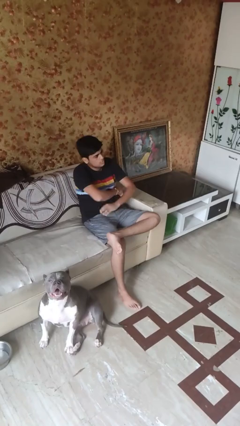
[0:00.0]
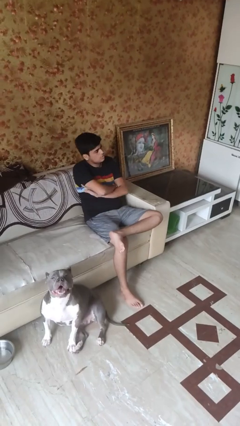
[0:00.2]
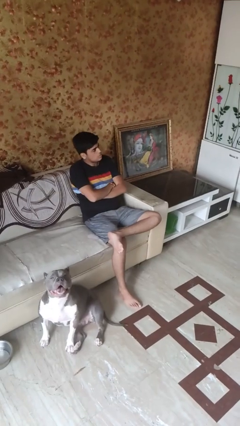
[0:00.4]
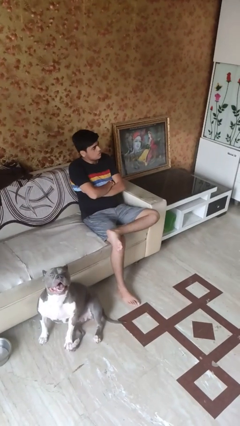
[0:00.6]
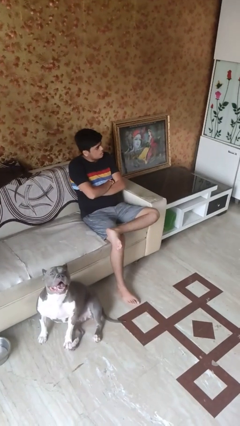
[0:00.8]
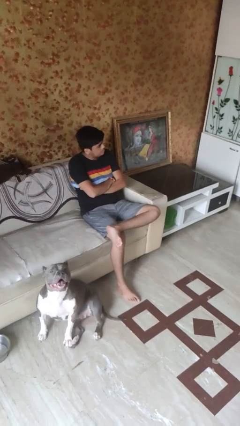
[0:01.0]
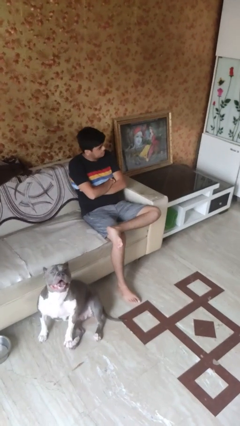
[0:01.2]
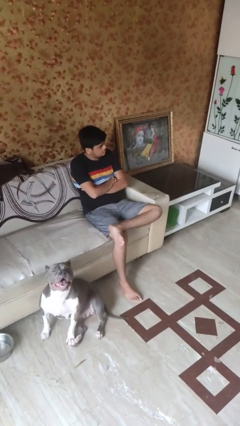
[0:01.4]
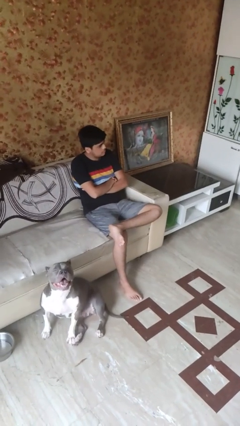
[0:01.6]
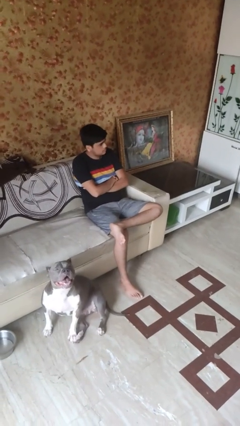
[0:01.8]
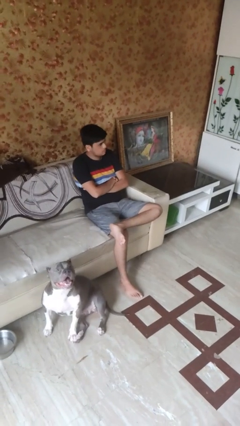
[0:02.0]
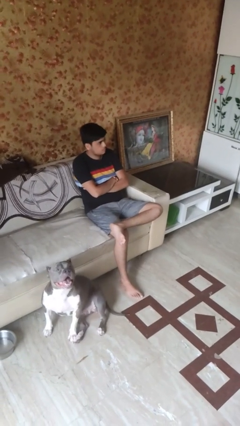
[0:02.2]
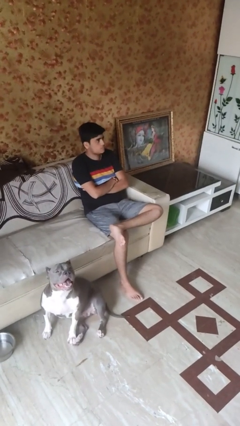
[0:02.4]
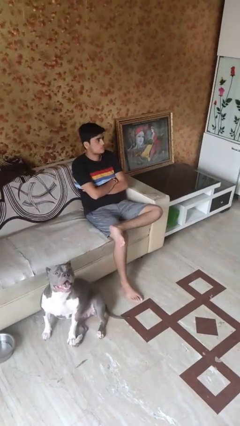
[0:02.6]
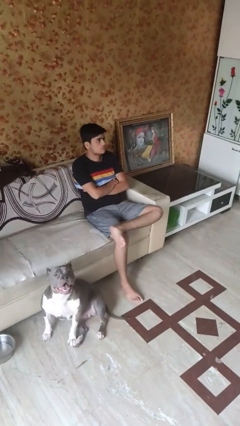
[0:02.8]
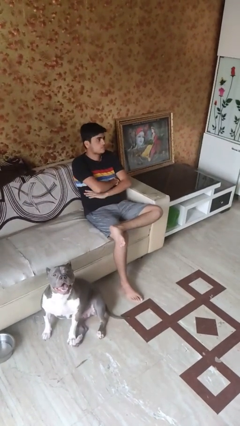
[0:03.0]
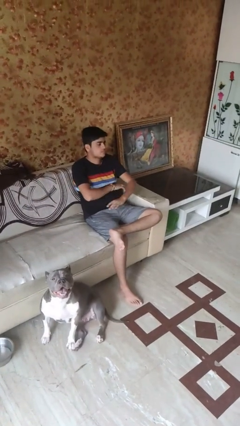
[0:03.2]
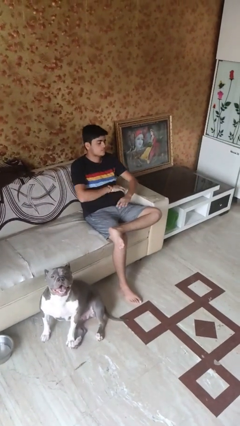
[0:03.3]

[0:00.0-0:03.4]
person crosses arms

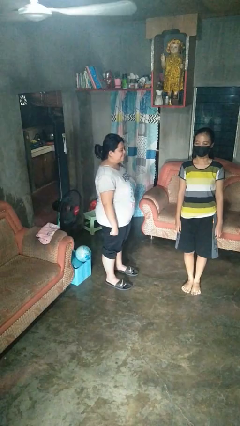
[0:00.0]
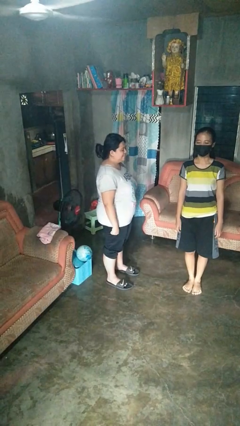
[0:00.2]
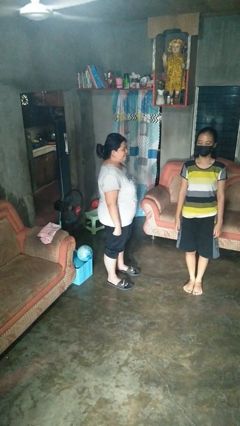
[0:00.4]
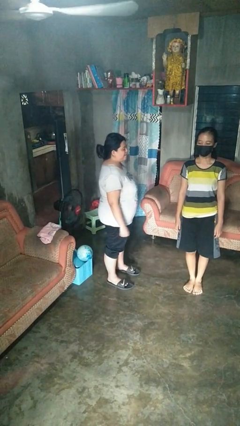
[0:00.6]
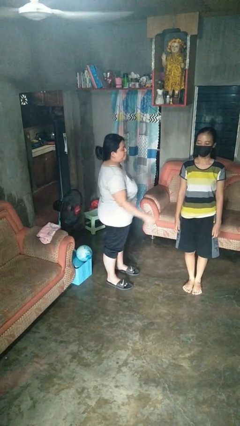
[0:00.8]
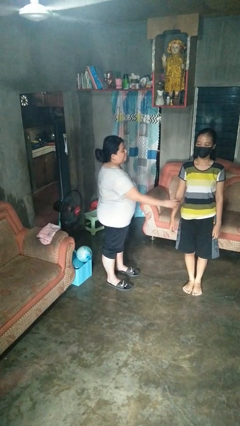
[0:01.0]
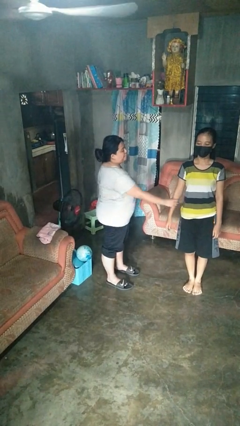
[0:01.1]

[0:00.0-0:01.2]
person grabs person by forearm

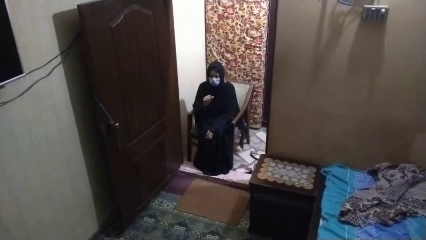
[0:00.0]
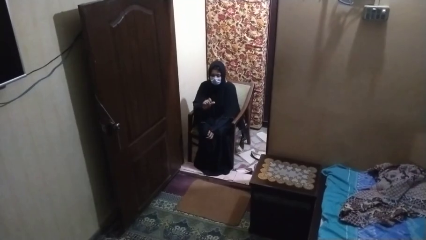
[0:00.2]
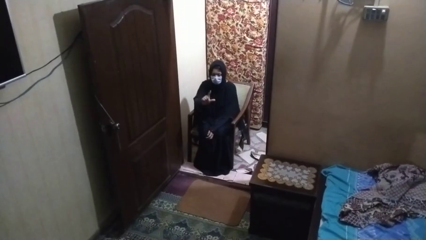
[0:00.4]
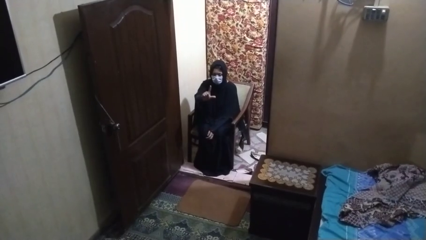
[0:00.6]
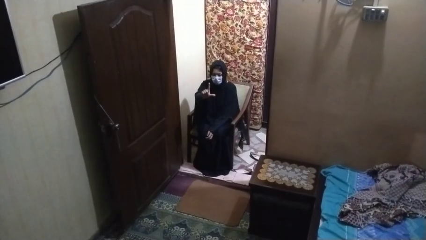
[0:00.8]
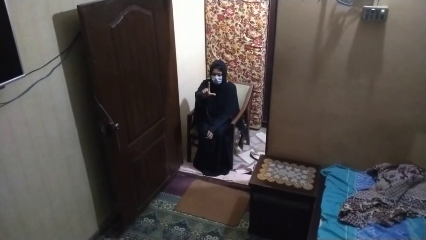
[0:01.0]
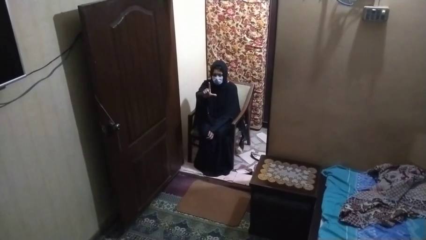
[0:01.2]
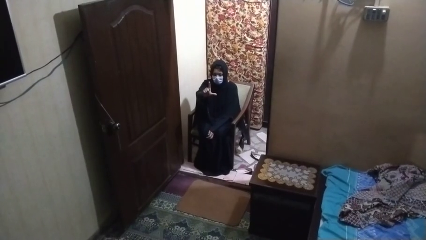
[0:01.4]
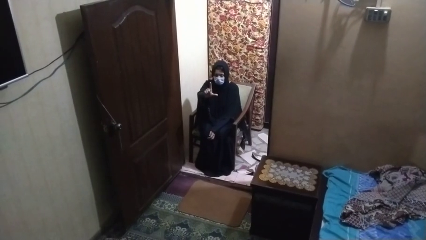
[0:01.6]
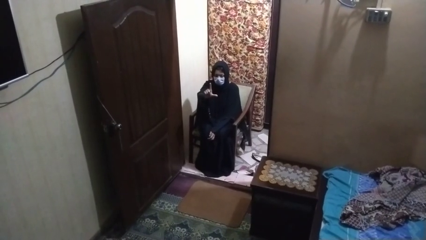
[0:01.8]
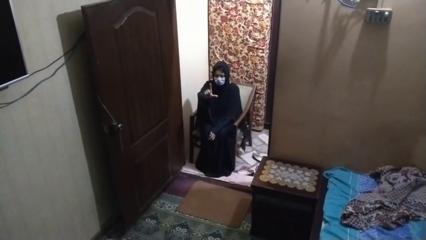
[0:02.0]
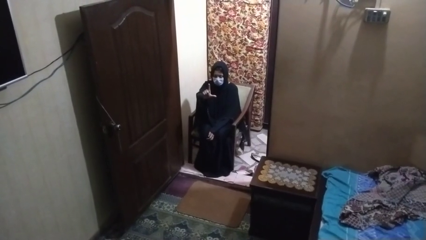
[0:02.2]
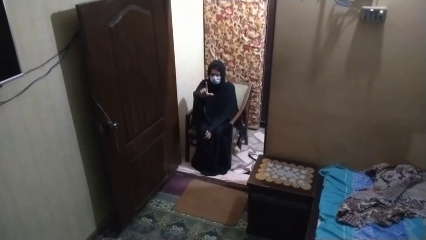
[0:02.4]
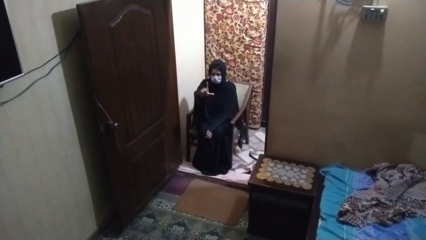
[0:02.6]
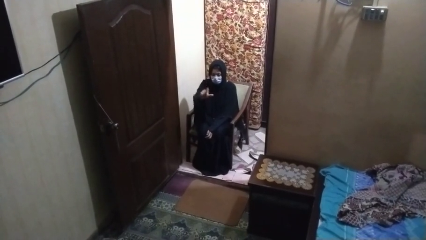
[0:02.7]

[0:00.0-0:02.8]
person gestures zoom in

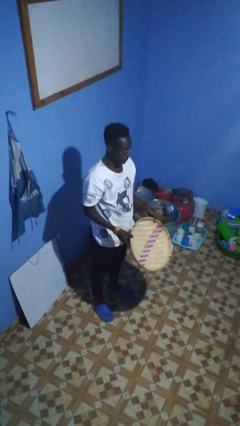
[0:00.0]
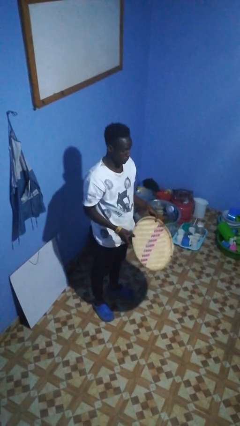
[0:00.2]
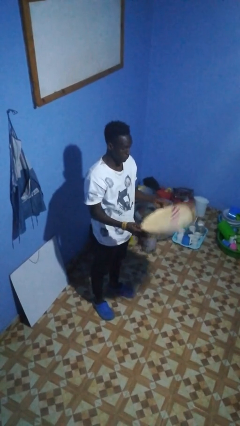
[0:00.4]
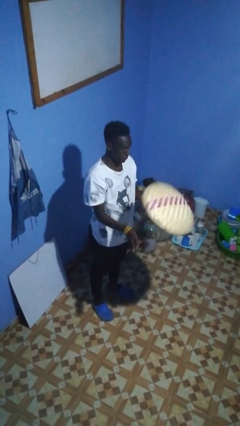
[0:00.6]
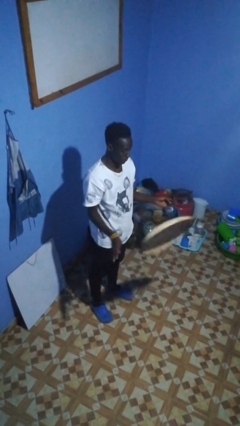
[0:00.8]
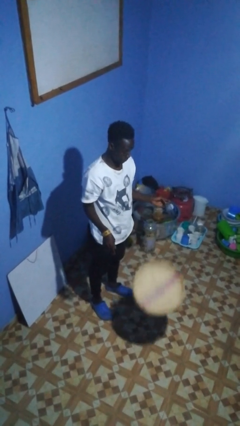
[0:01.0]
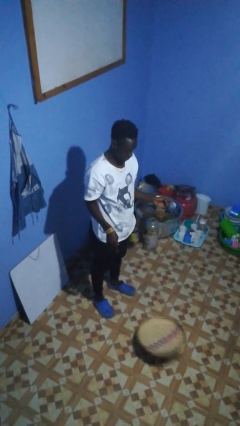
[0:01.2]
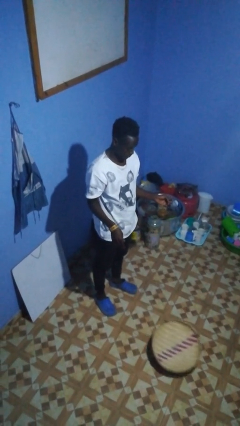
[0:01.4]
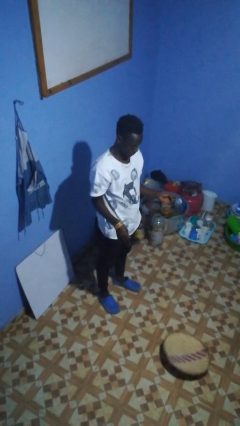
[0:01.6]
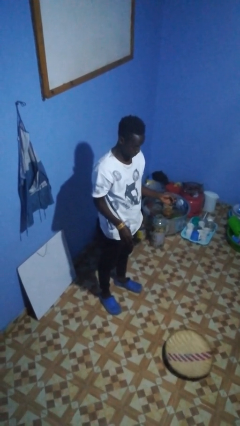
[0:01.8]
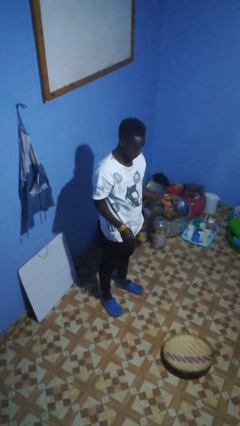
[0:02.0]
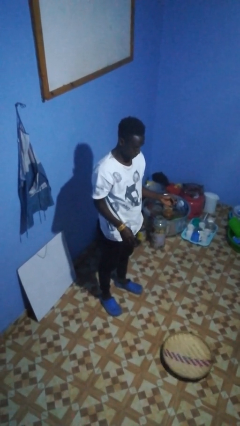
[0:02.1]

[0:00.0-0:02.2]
person throws object into air

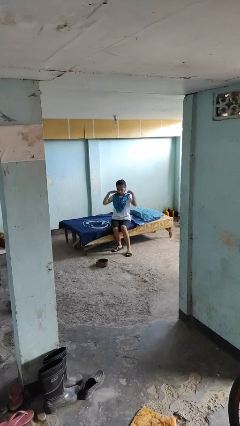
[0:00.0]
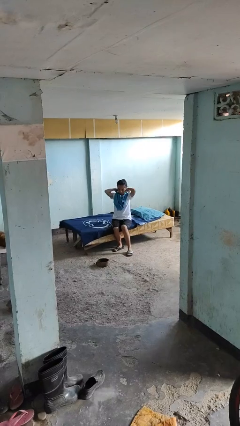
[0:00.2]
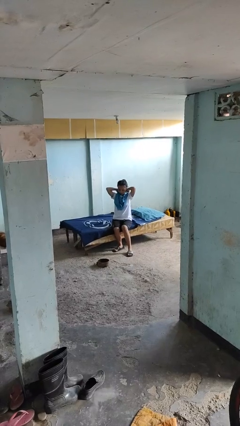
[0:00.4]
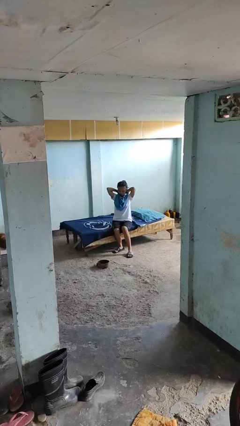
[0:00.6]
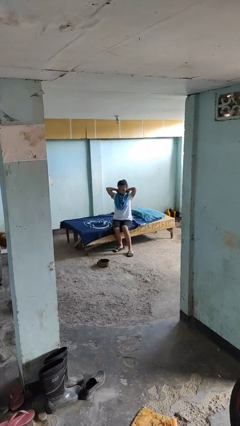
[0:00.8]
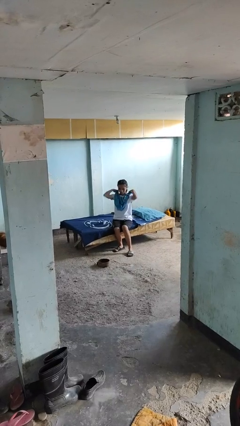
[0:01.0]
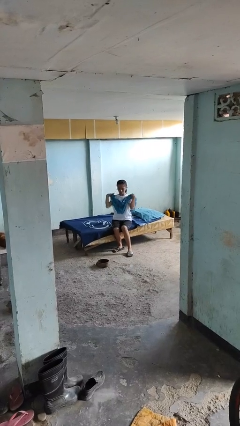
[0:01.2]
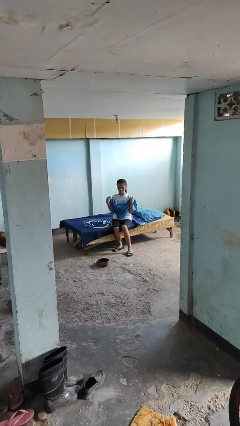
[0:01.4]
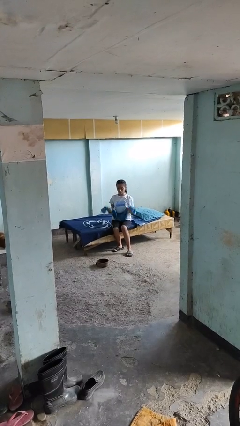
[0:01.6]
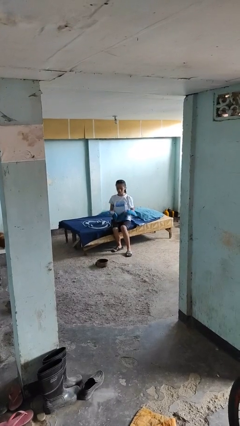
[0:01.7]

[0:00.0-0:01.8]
person takes off scarf

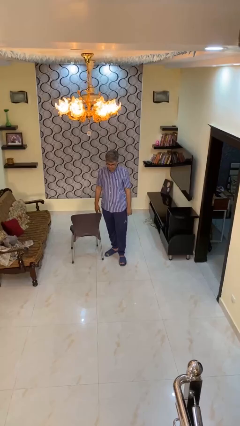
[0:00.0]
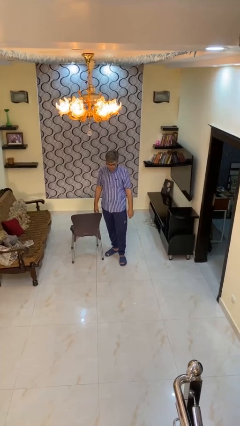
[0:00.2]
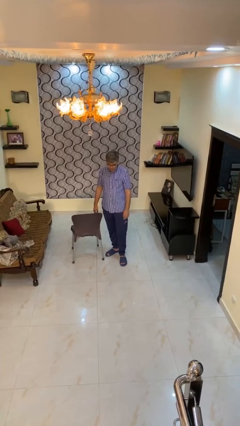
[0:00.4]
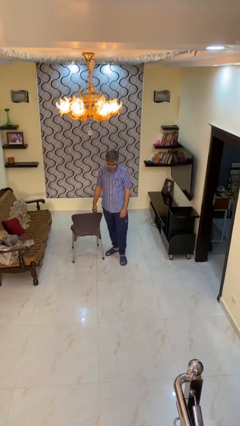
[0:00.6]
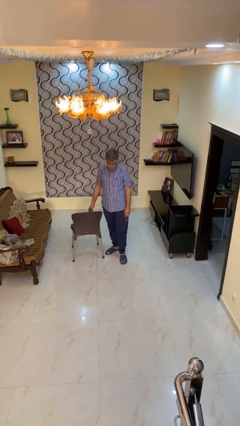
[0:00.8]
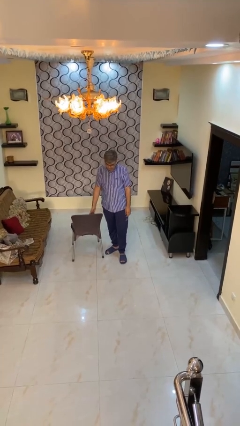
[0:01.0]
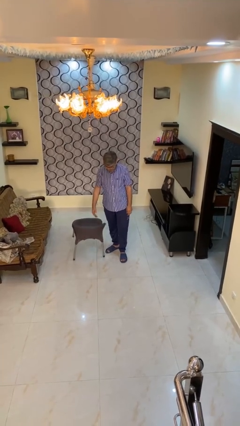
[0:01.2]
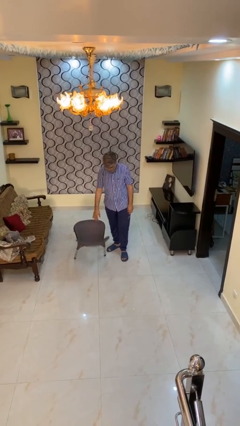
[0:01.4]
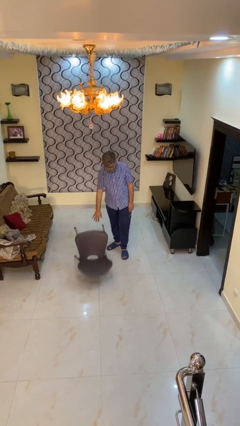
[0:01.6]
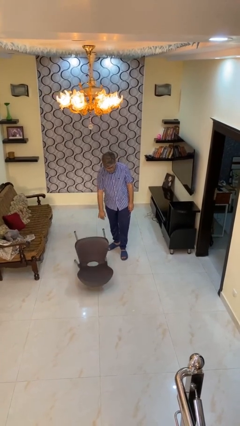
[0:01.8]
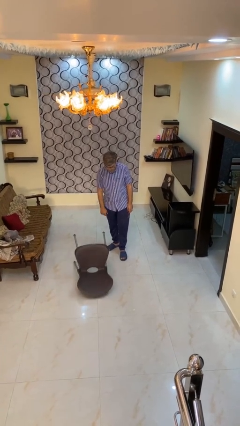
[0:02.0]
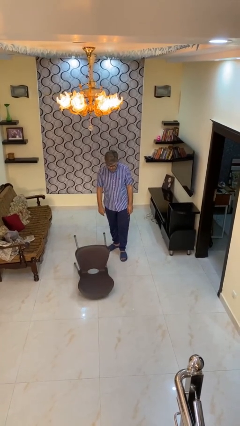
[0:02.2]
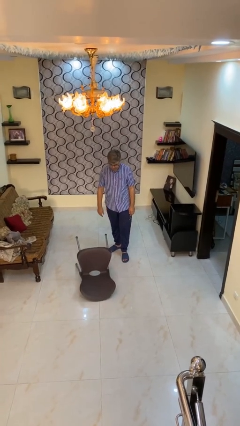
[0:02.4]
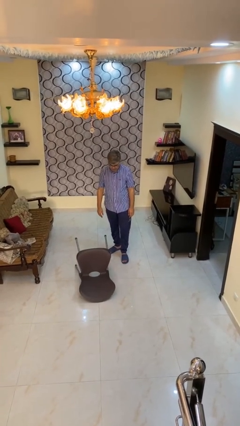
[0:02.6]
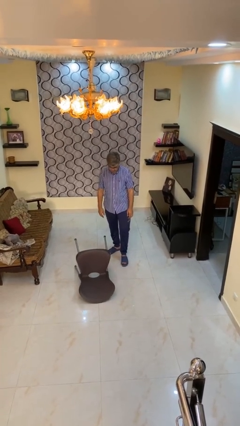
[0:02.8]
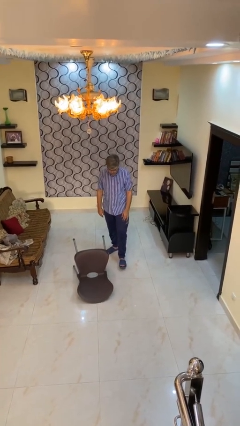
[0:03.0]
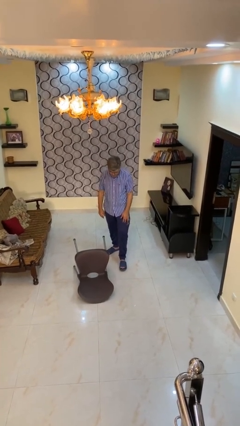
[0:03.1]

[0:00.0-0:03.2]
person knocks over furniture

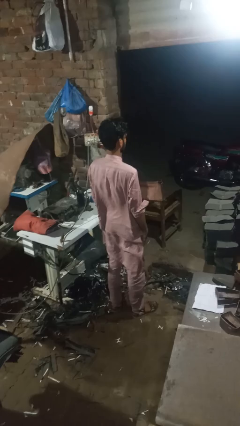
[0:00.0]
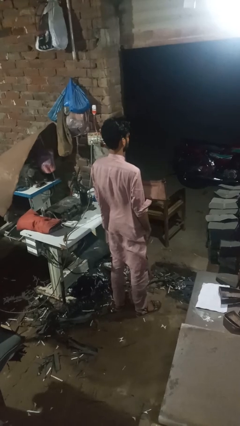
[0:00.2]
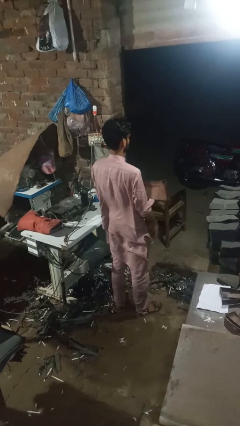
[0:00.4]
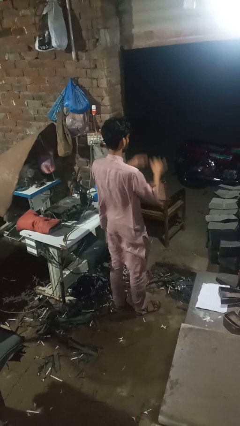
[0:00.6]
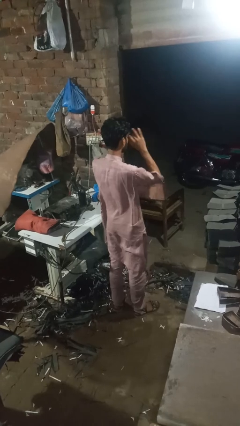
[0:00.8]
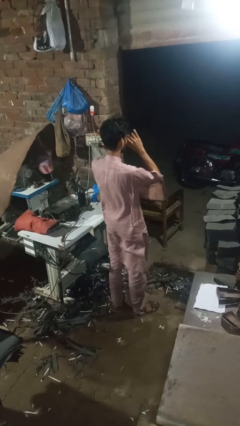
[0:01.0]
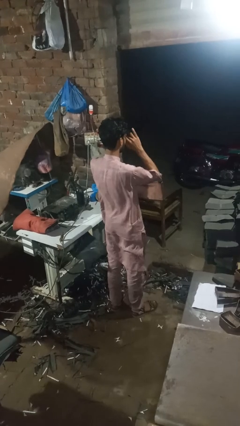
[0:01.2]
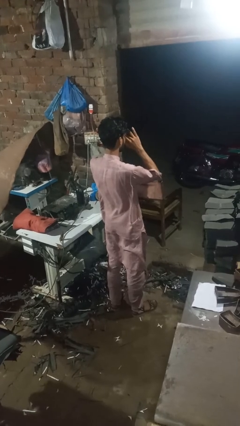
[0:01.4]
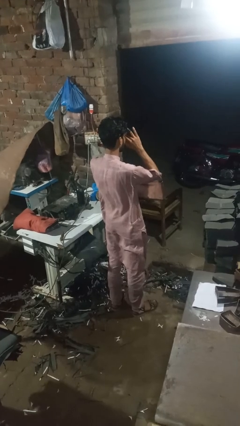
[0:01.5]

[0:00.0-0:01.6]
person rubs eyes

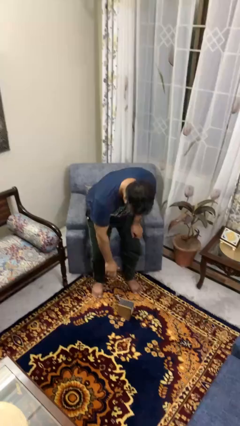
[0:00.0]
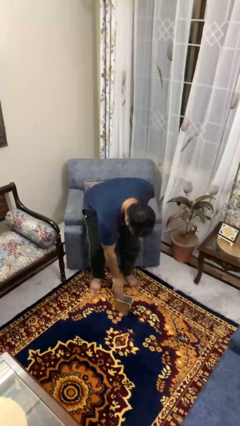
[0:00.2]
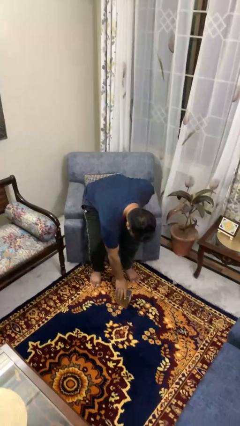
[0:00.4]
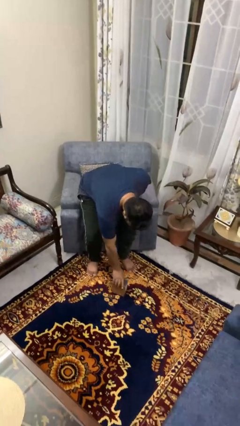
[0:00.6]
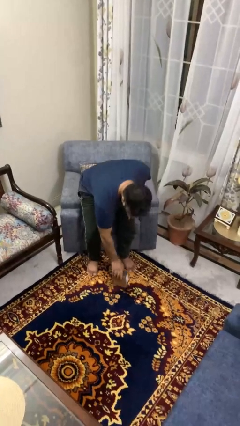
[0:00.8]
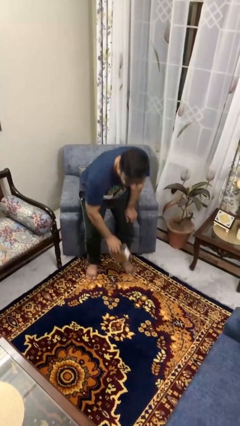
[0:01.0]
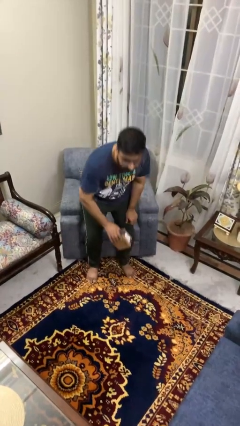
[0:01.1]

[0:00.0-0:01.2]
person picks up object from floor
